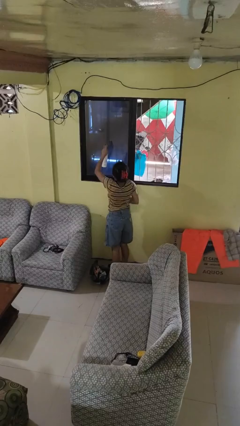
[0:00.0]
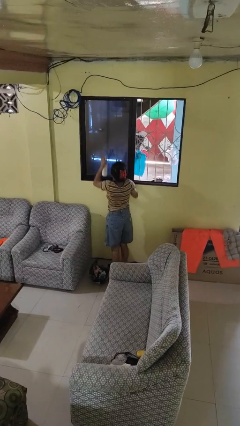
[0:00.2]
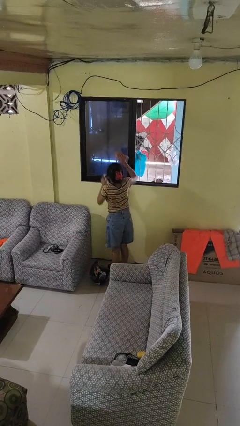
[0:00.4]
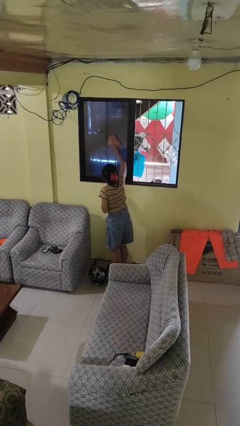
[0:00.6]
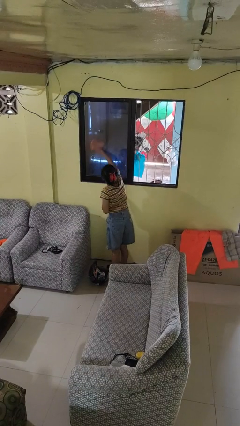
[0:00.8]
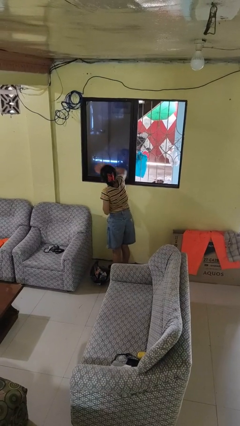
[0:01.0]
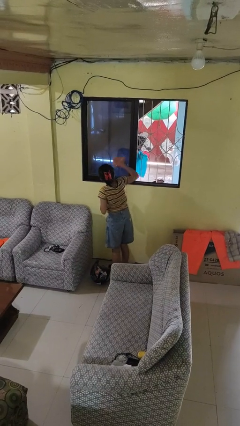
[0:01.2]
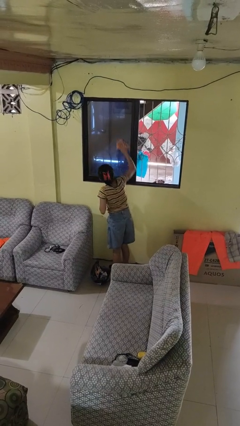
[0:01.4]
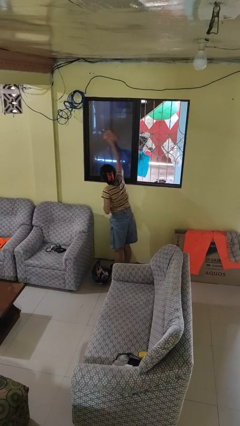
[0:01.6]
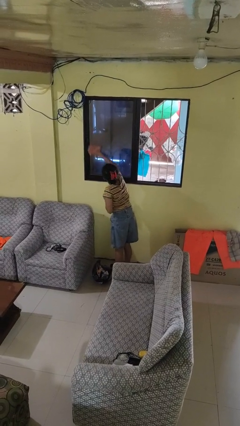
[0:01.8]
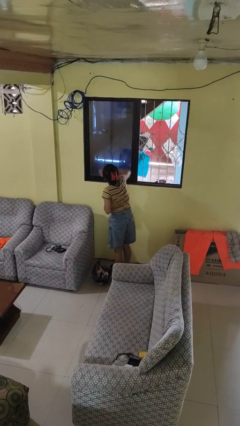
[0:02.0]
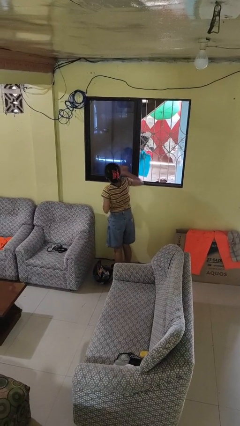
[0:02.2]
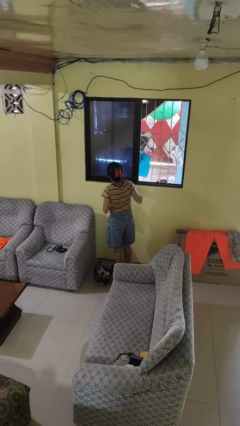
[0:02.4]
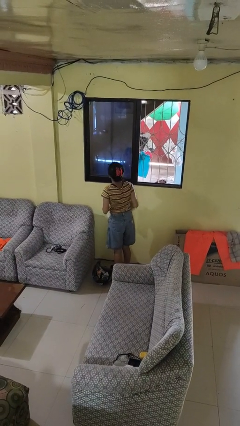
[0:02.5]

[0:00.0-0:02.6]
person washes window

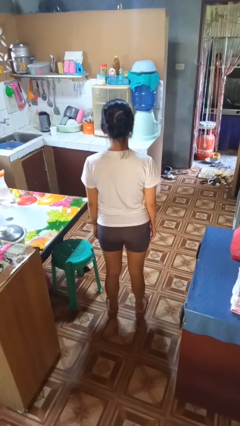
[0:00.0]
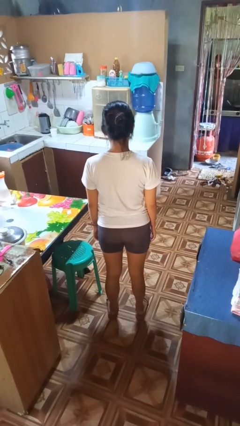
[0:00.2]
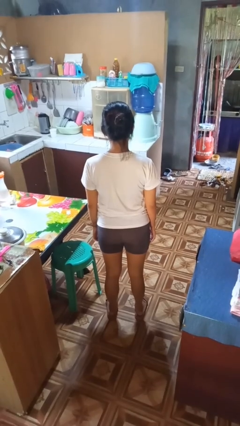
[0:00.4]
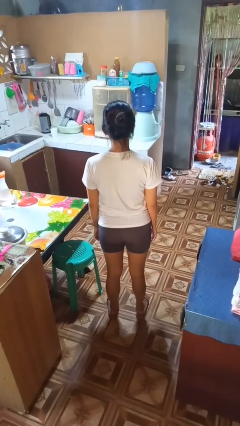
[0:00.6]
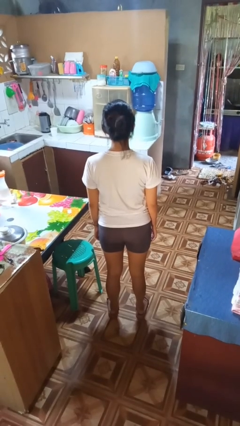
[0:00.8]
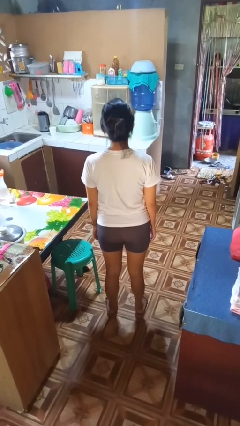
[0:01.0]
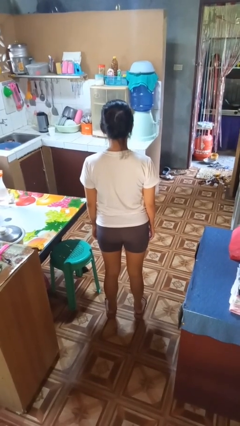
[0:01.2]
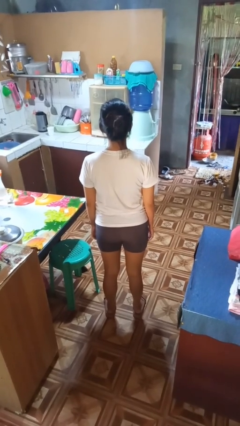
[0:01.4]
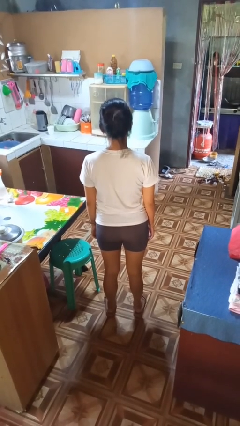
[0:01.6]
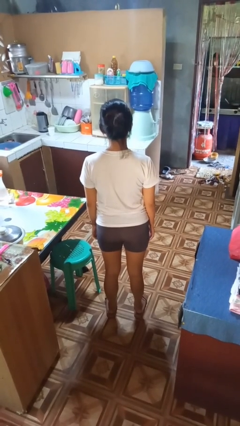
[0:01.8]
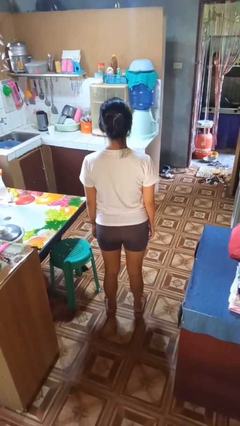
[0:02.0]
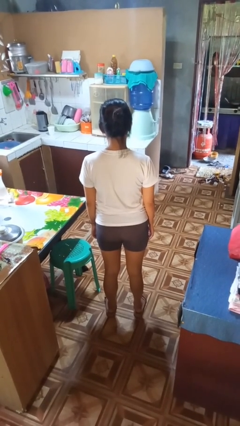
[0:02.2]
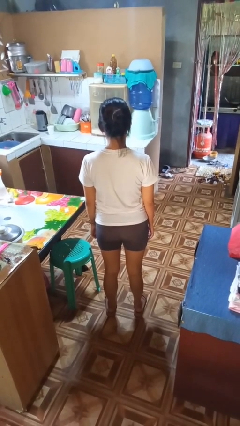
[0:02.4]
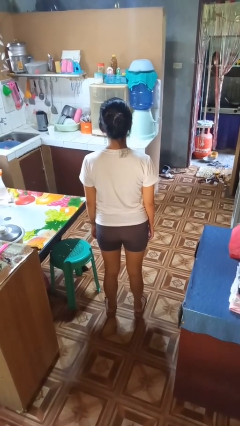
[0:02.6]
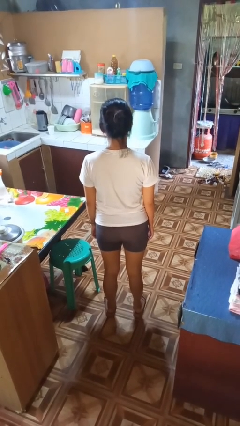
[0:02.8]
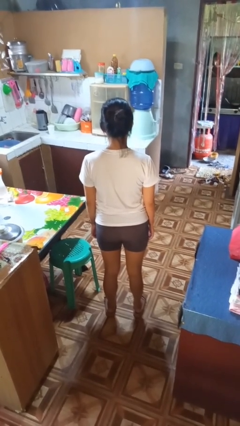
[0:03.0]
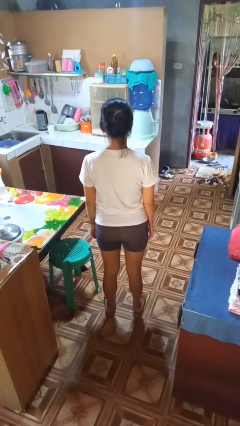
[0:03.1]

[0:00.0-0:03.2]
person nods head

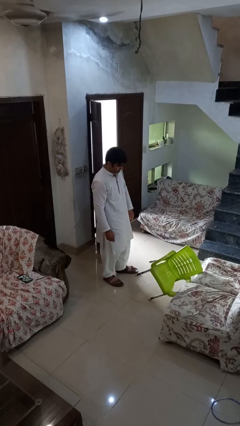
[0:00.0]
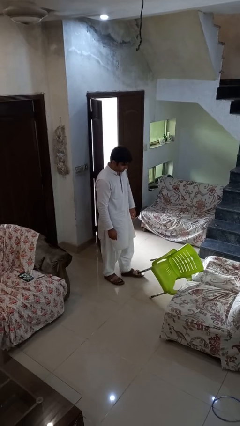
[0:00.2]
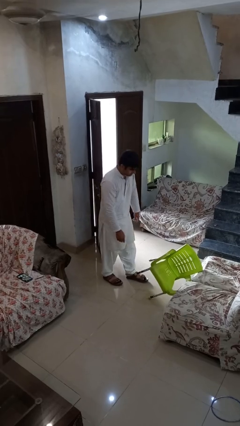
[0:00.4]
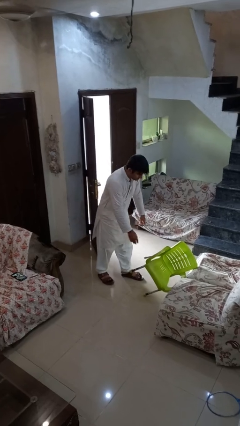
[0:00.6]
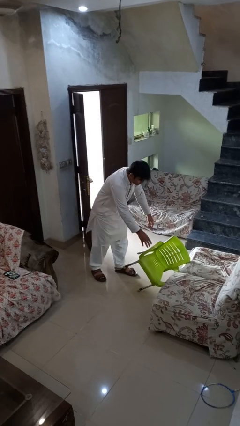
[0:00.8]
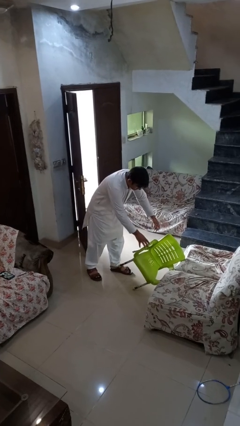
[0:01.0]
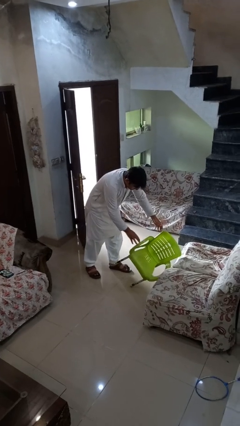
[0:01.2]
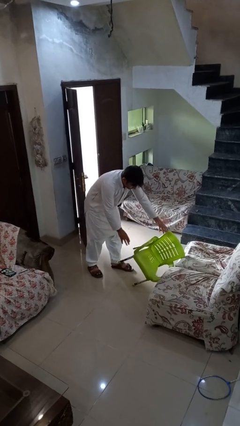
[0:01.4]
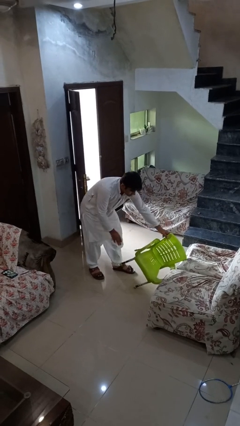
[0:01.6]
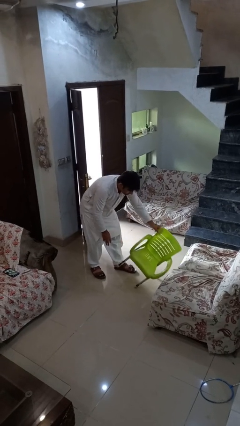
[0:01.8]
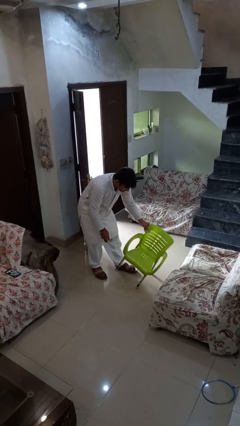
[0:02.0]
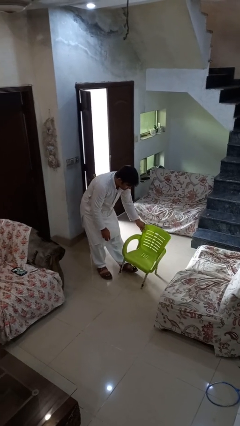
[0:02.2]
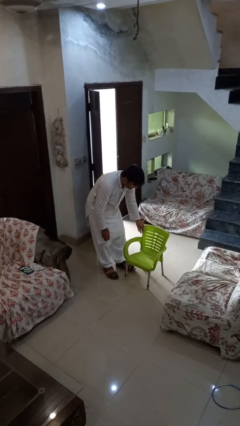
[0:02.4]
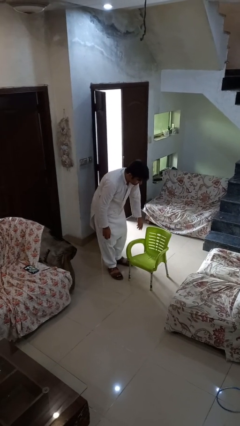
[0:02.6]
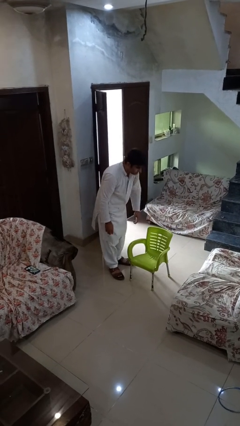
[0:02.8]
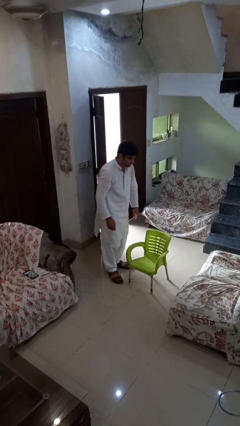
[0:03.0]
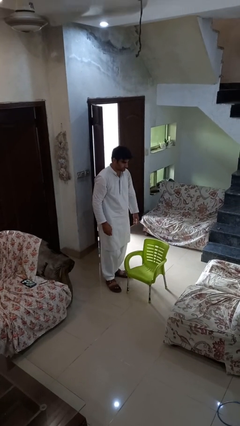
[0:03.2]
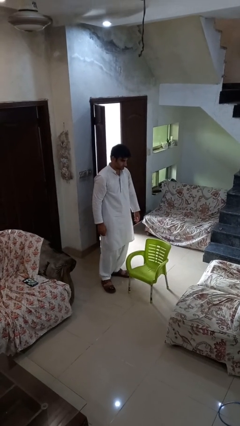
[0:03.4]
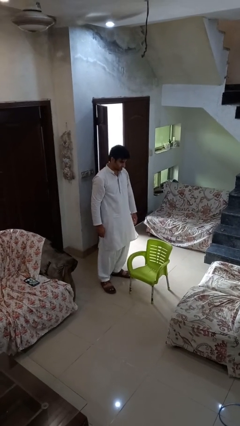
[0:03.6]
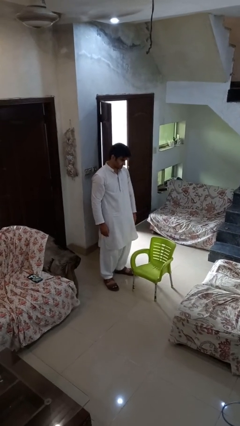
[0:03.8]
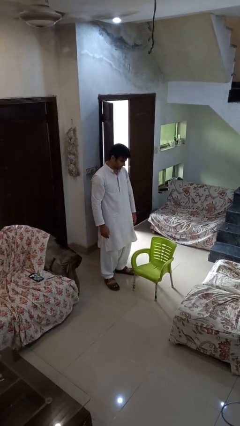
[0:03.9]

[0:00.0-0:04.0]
person sets upright furniture

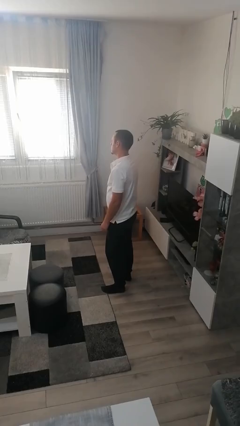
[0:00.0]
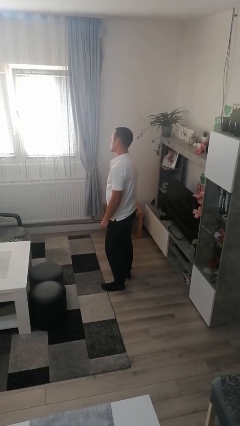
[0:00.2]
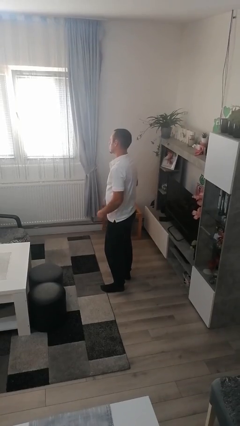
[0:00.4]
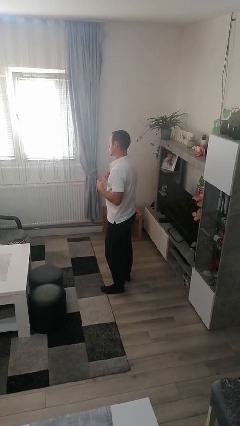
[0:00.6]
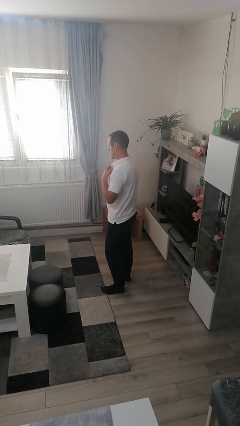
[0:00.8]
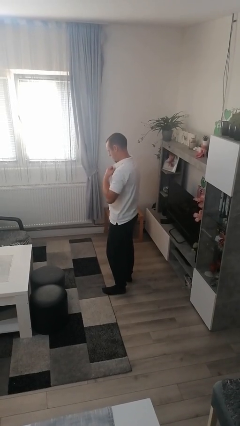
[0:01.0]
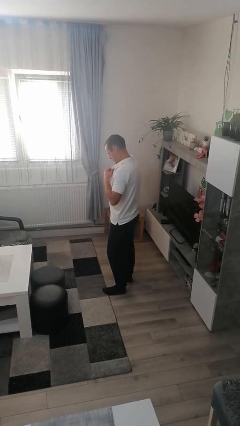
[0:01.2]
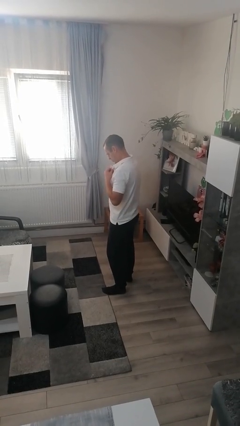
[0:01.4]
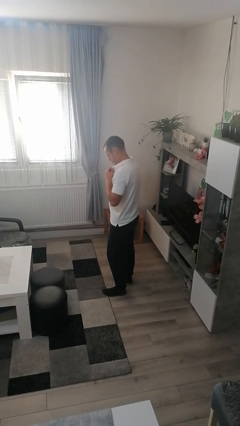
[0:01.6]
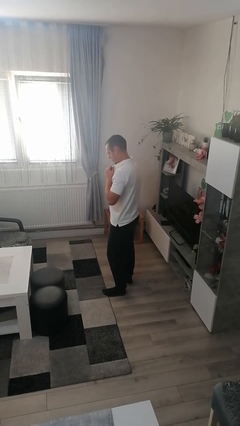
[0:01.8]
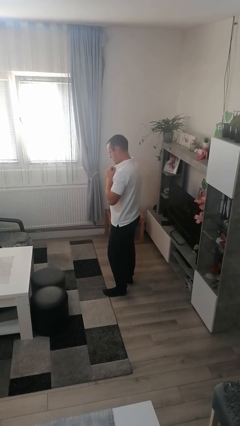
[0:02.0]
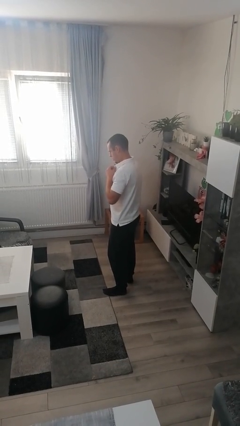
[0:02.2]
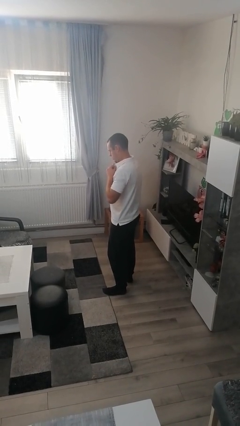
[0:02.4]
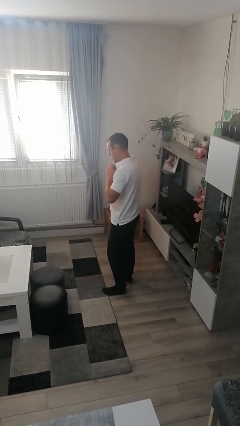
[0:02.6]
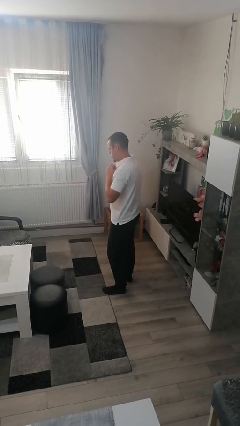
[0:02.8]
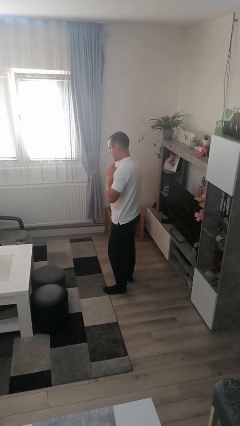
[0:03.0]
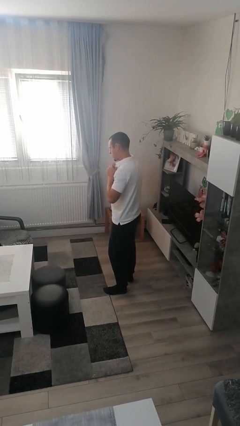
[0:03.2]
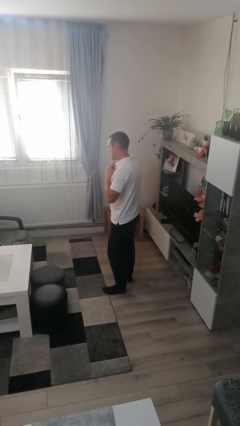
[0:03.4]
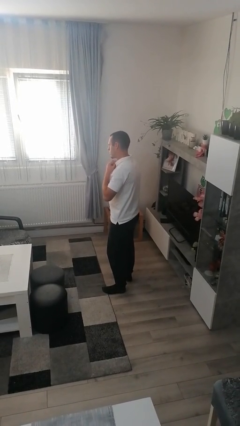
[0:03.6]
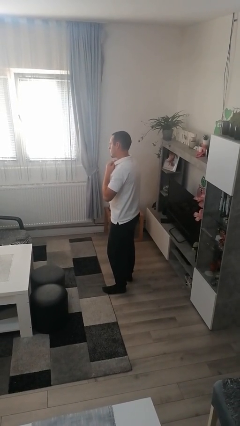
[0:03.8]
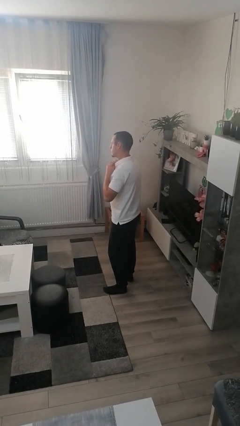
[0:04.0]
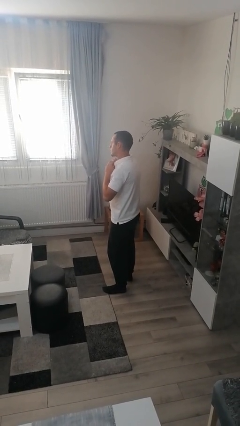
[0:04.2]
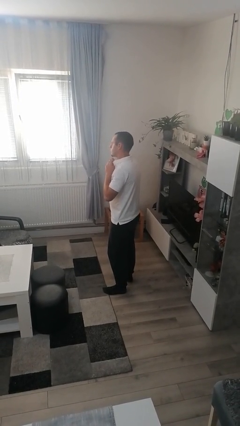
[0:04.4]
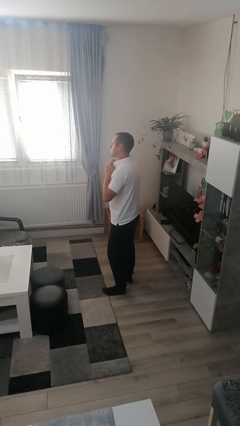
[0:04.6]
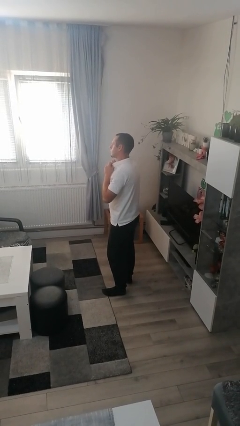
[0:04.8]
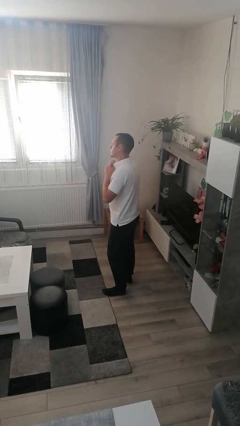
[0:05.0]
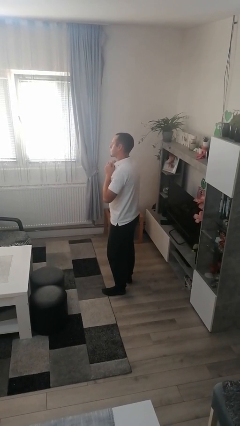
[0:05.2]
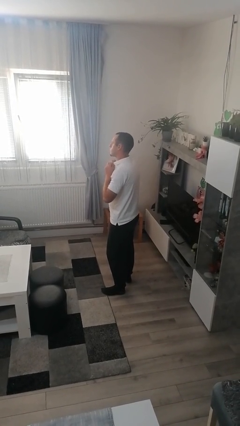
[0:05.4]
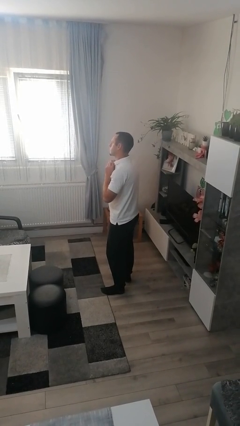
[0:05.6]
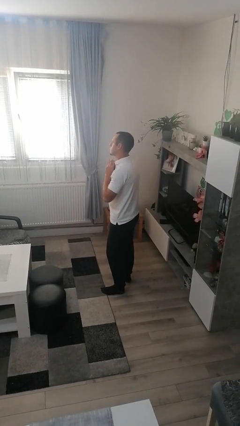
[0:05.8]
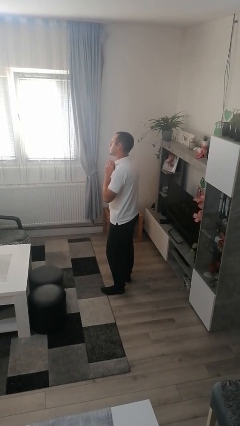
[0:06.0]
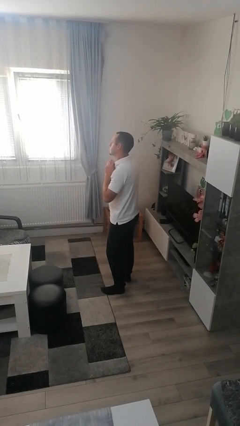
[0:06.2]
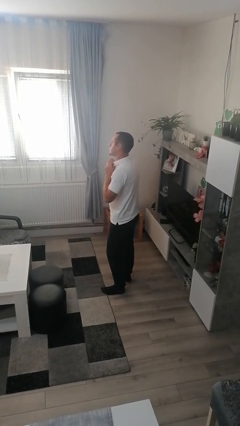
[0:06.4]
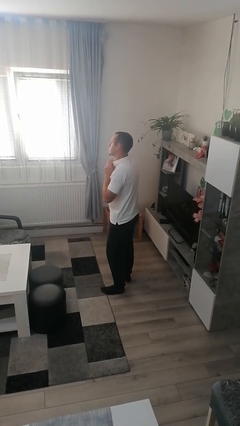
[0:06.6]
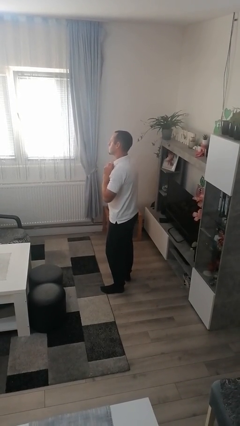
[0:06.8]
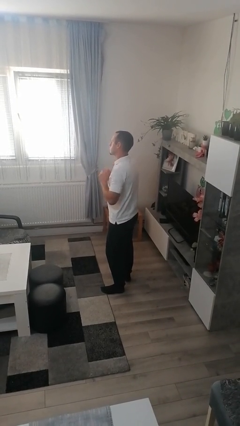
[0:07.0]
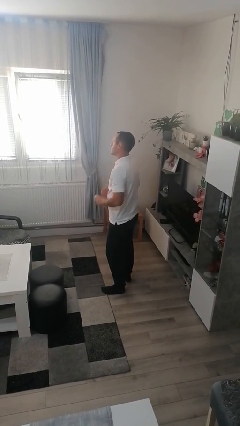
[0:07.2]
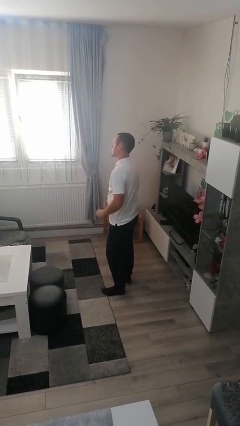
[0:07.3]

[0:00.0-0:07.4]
person buttons shirt

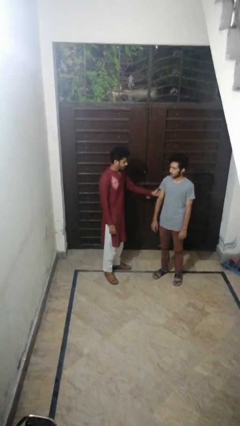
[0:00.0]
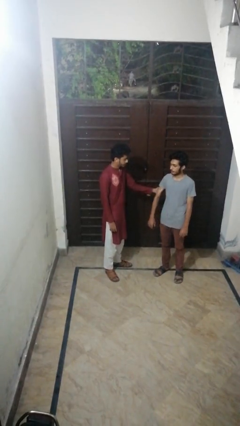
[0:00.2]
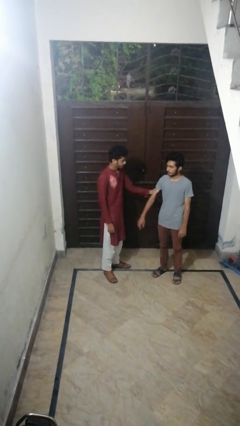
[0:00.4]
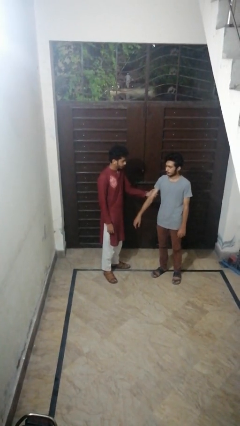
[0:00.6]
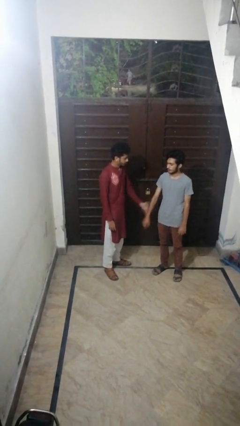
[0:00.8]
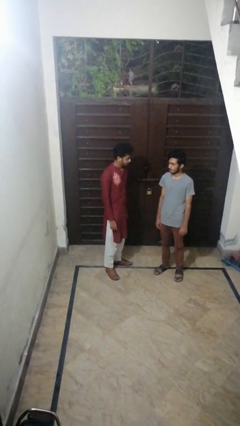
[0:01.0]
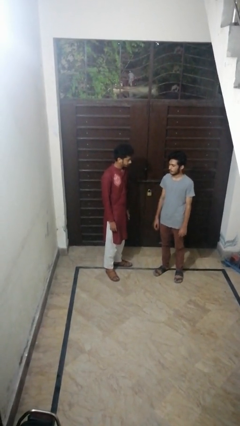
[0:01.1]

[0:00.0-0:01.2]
person grabs person by bicep
